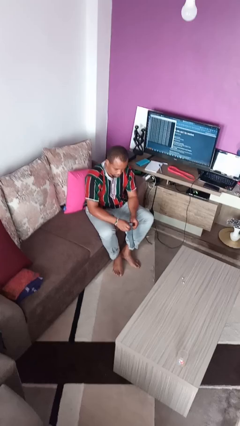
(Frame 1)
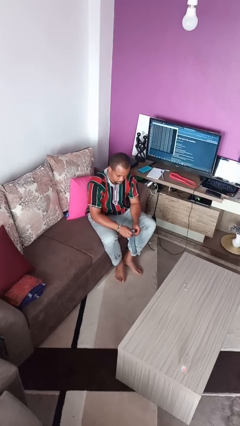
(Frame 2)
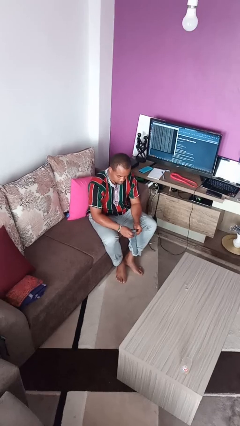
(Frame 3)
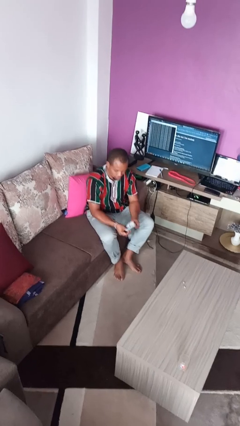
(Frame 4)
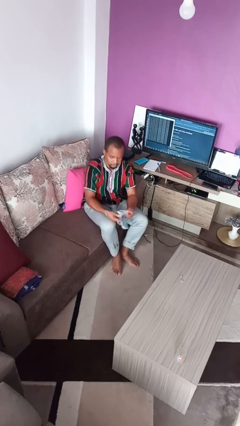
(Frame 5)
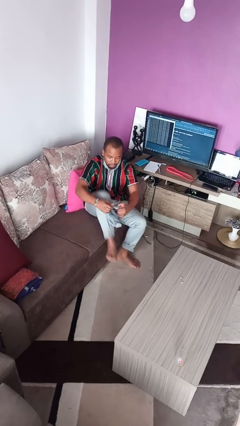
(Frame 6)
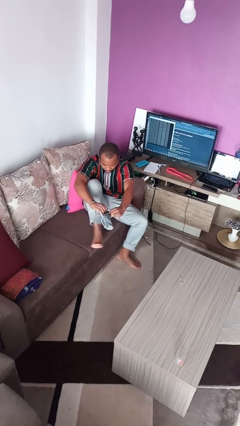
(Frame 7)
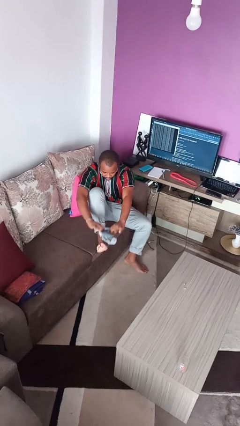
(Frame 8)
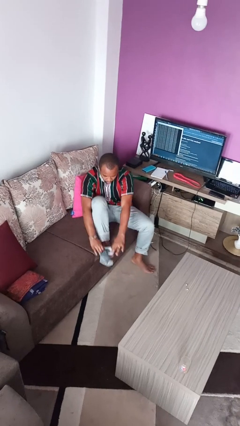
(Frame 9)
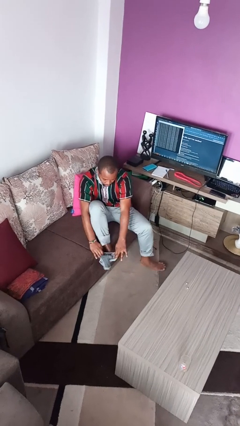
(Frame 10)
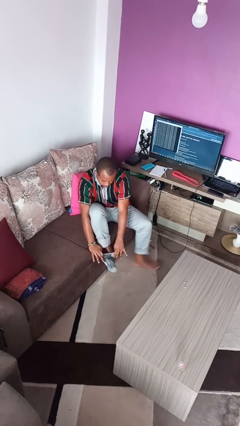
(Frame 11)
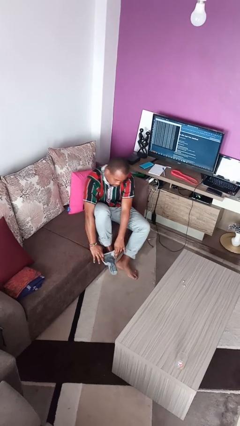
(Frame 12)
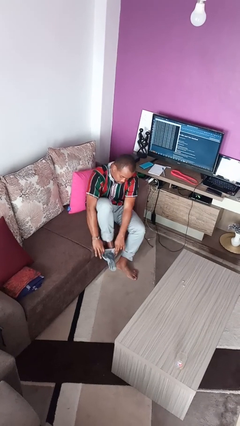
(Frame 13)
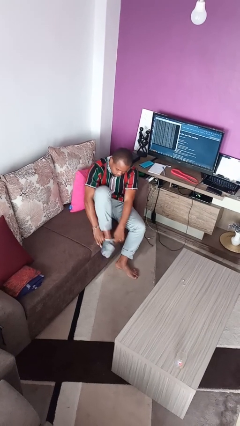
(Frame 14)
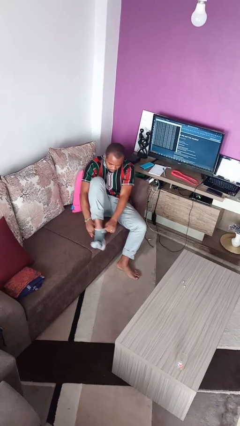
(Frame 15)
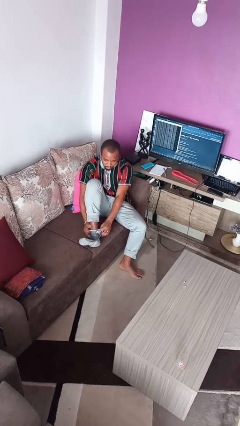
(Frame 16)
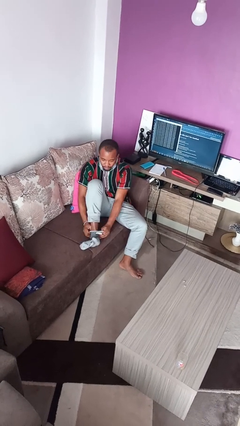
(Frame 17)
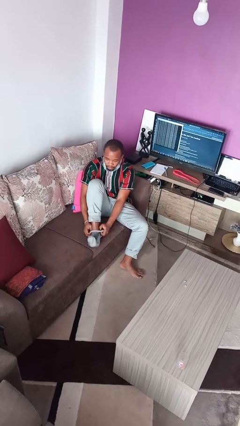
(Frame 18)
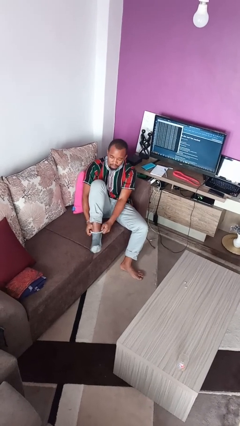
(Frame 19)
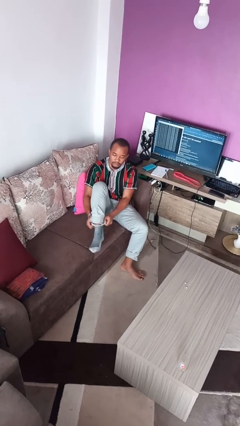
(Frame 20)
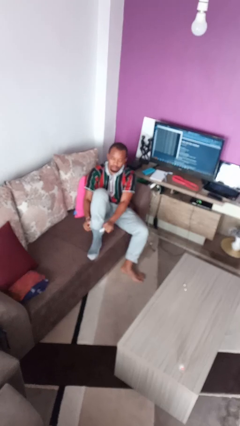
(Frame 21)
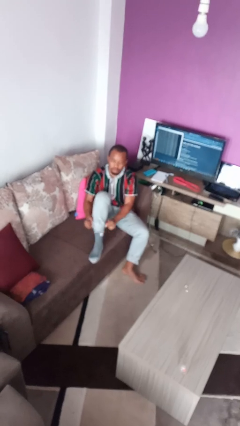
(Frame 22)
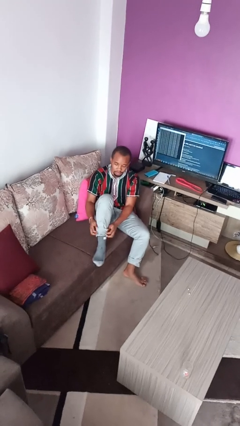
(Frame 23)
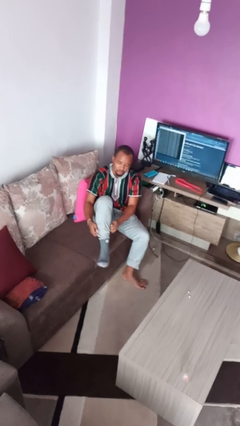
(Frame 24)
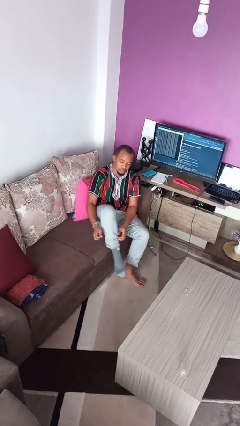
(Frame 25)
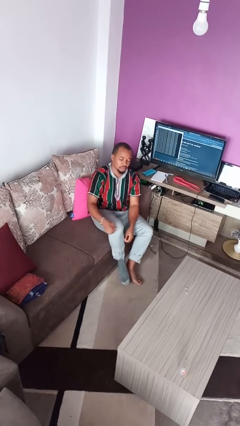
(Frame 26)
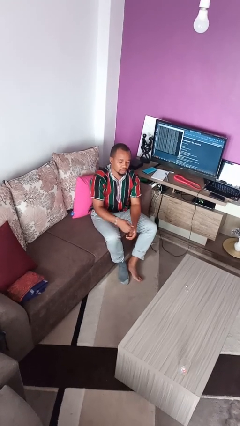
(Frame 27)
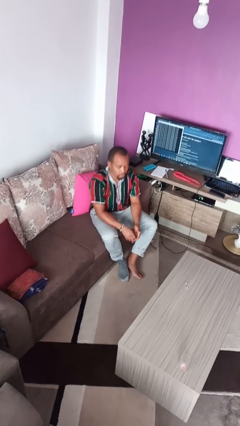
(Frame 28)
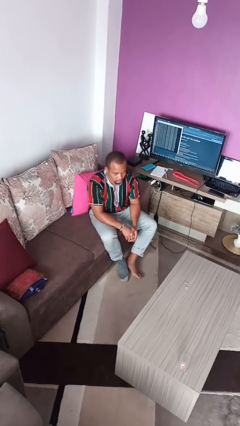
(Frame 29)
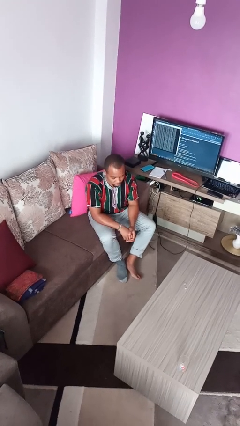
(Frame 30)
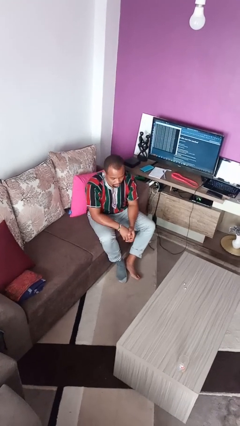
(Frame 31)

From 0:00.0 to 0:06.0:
person puts on socks

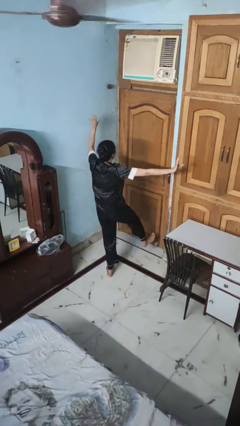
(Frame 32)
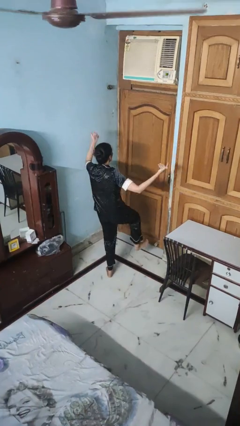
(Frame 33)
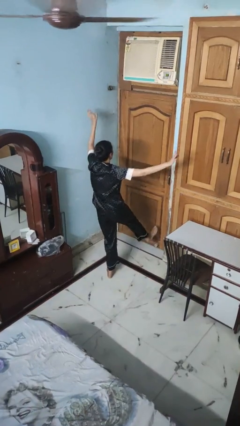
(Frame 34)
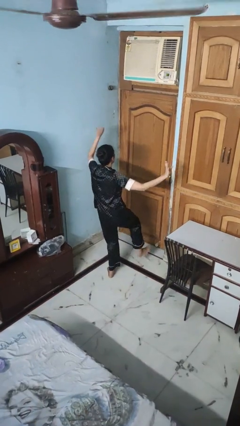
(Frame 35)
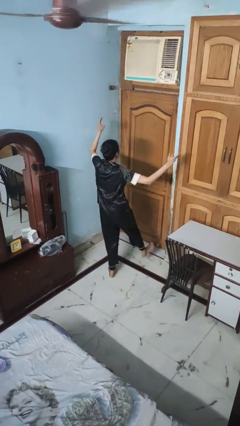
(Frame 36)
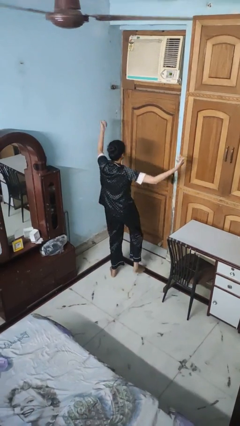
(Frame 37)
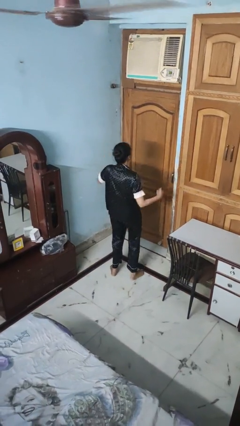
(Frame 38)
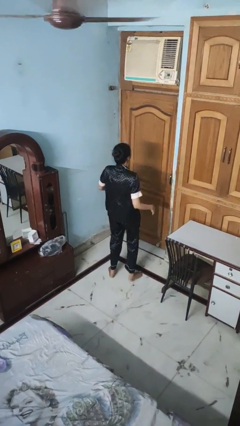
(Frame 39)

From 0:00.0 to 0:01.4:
person dances in place

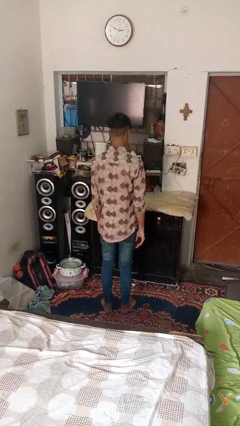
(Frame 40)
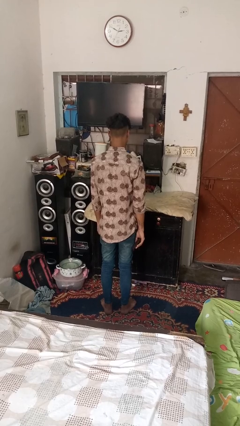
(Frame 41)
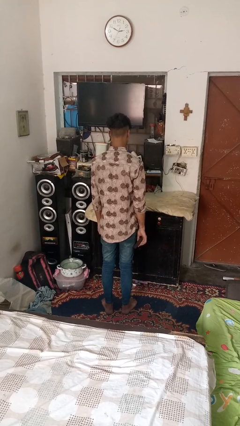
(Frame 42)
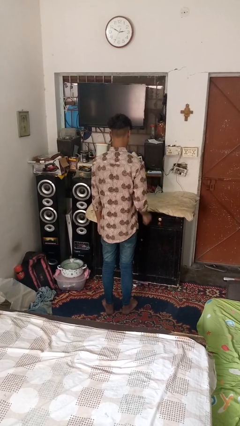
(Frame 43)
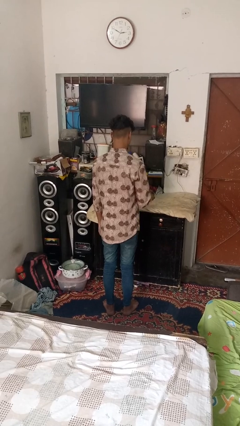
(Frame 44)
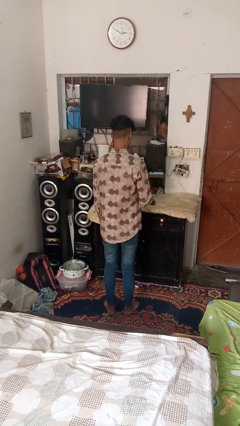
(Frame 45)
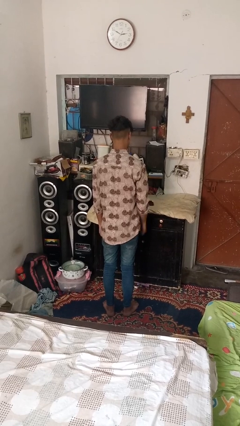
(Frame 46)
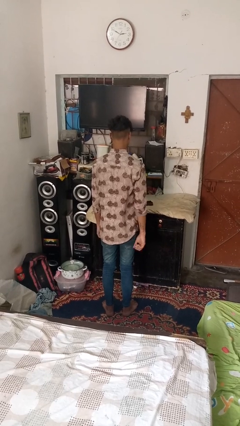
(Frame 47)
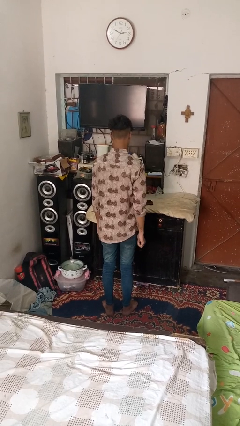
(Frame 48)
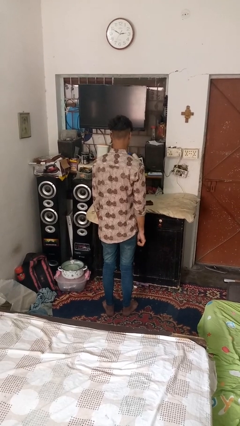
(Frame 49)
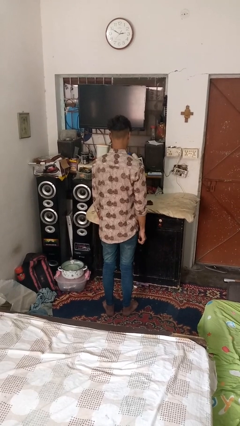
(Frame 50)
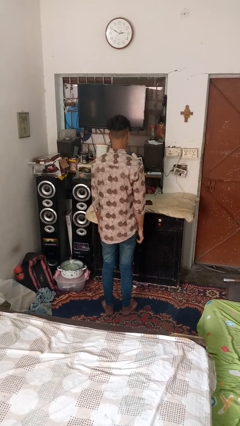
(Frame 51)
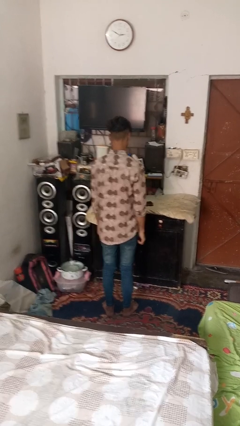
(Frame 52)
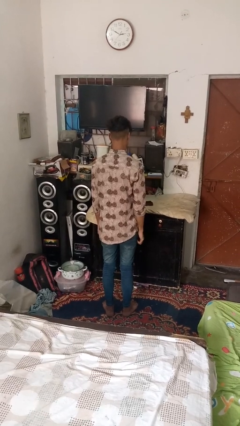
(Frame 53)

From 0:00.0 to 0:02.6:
person throws object on table

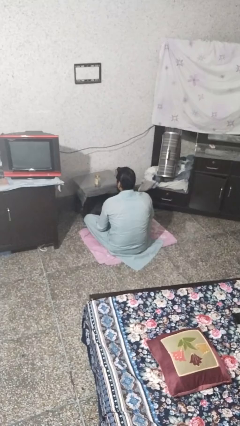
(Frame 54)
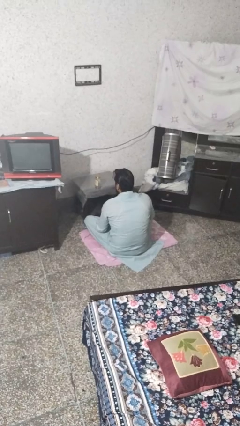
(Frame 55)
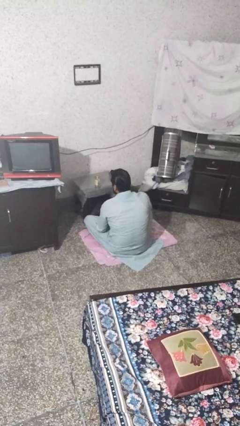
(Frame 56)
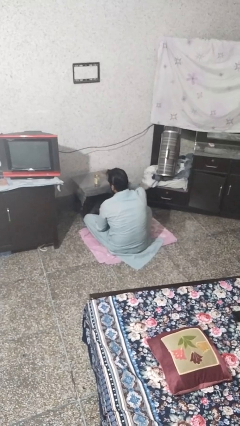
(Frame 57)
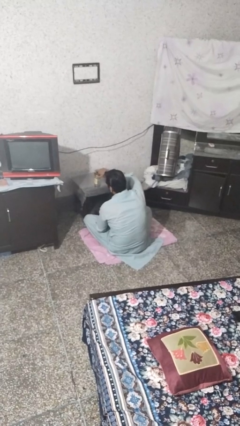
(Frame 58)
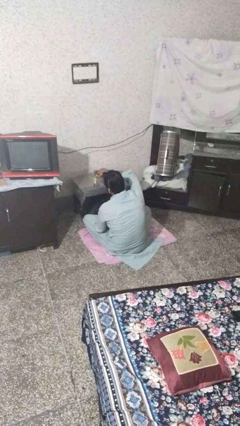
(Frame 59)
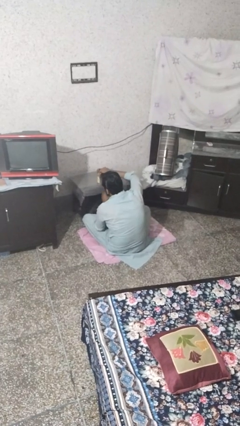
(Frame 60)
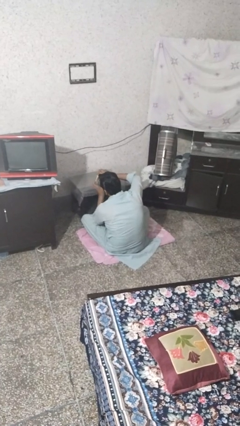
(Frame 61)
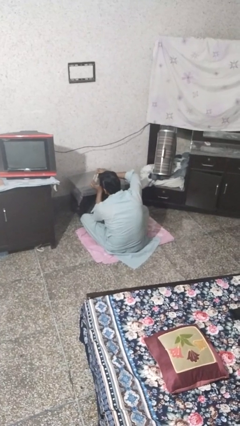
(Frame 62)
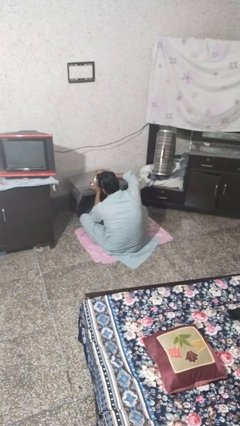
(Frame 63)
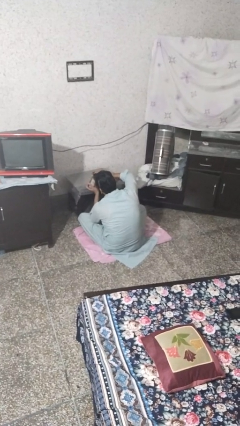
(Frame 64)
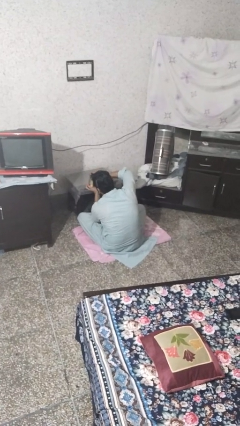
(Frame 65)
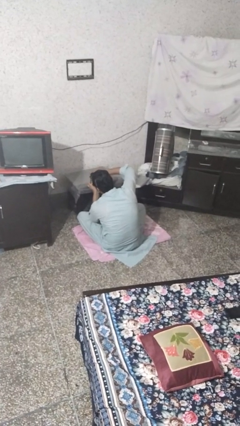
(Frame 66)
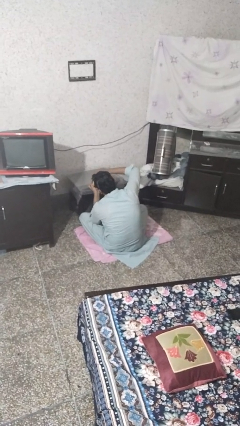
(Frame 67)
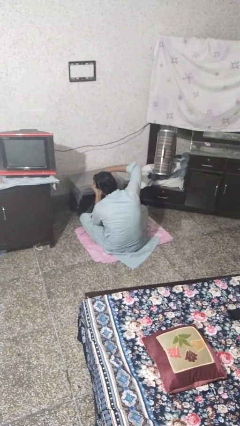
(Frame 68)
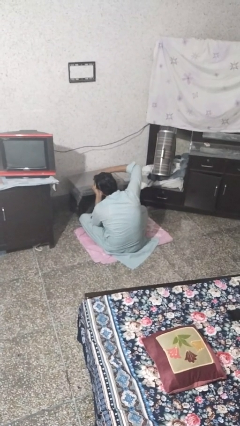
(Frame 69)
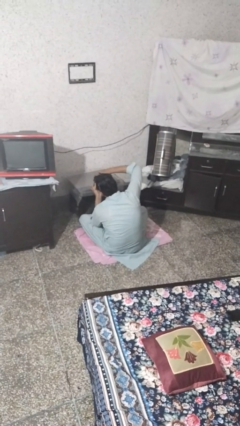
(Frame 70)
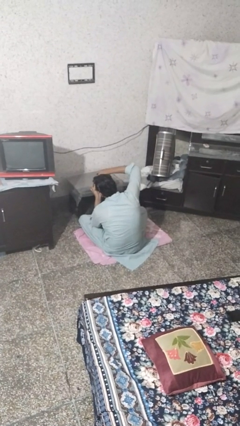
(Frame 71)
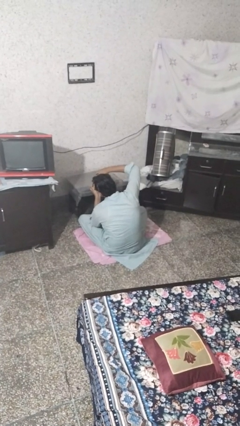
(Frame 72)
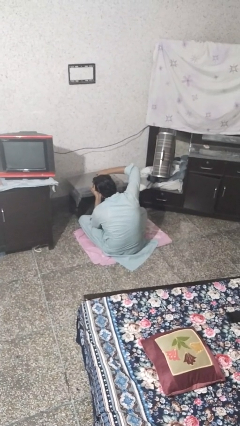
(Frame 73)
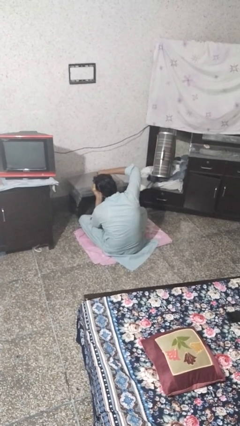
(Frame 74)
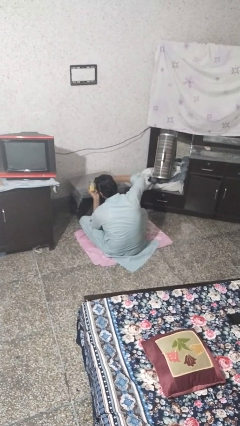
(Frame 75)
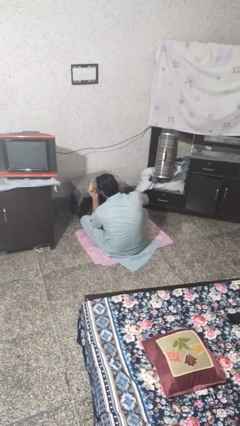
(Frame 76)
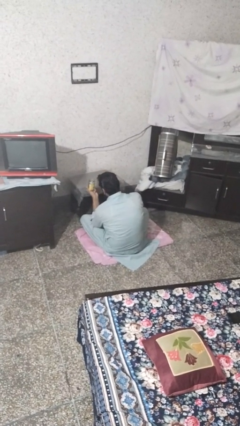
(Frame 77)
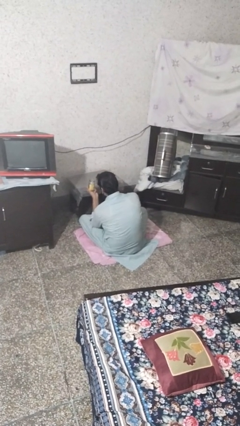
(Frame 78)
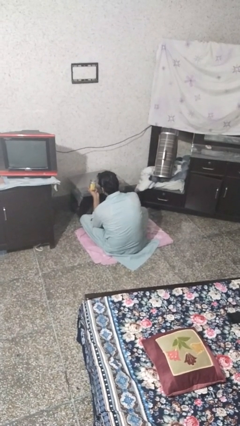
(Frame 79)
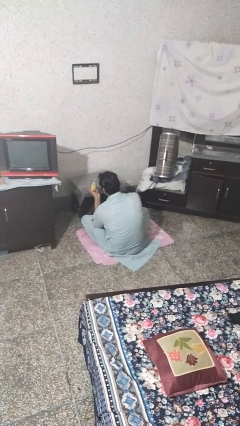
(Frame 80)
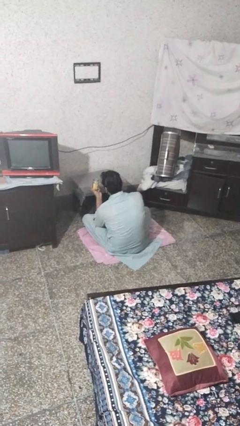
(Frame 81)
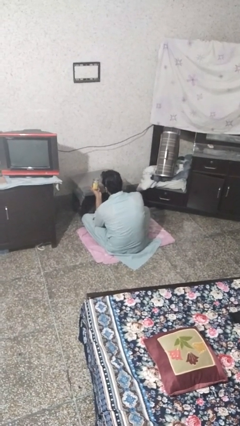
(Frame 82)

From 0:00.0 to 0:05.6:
person opens jar

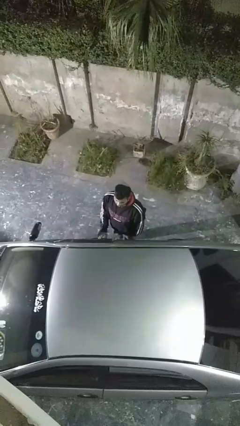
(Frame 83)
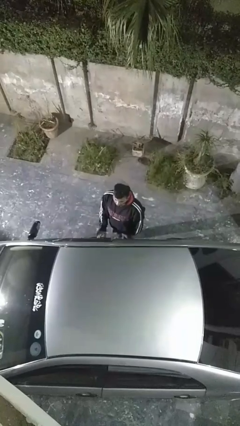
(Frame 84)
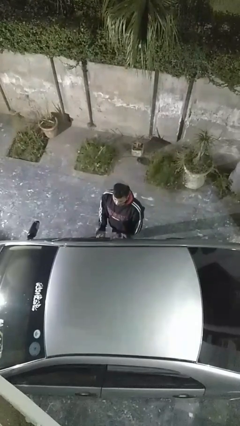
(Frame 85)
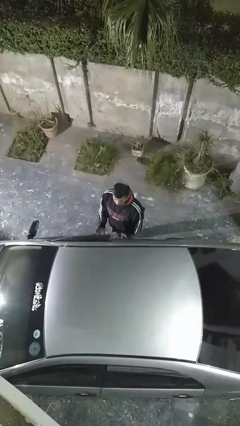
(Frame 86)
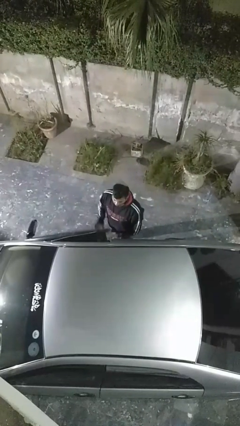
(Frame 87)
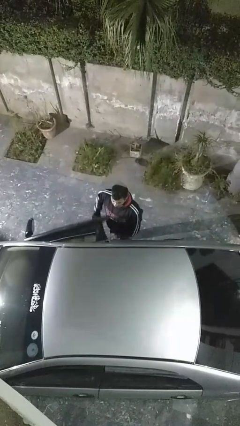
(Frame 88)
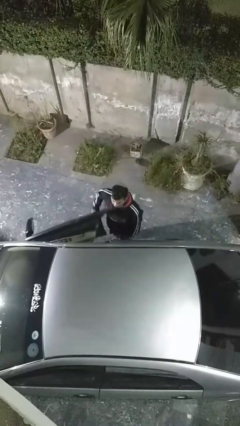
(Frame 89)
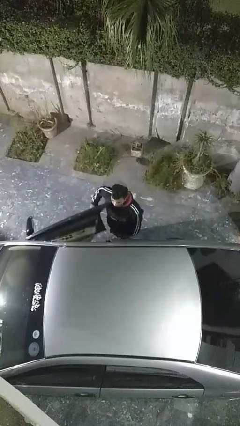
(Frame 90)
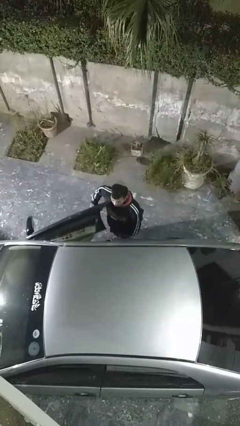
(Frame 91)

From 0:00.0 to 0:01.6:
person opens car door
